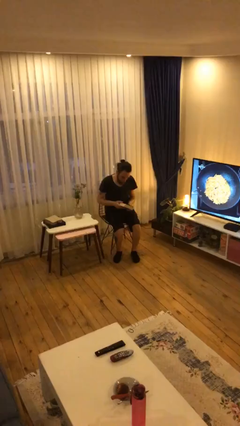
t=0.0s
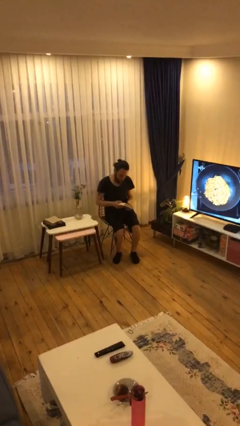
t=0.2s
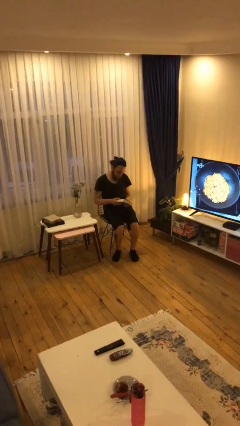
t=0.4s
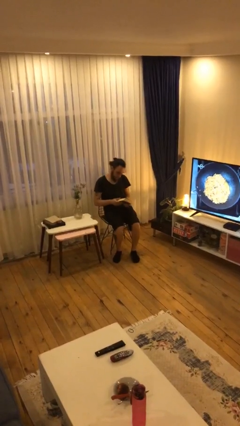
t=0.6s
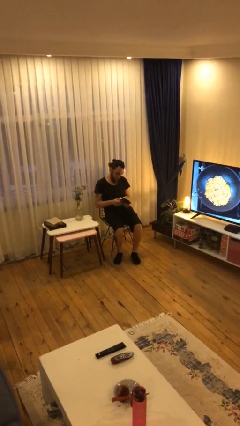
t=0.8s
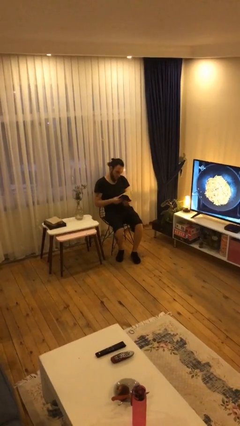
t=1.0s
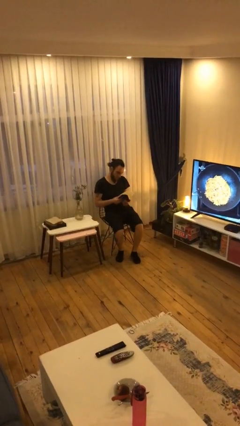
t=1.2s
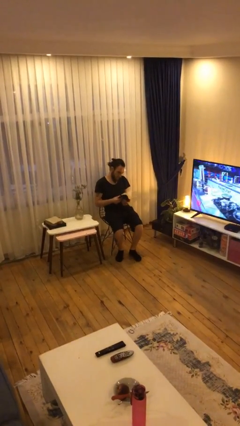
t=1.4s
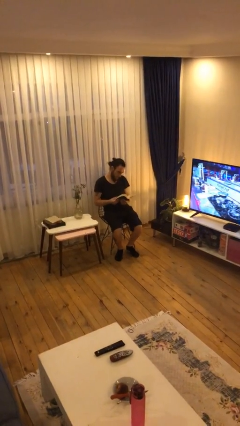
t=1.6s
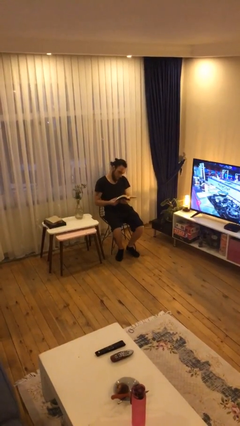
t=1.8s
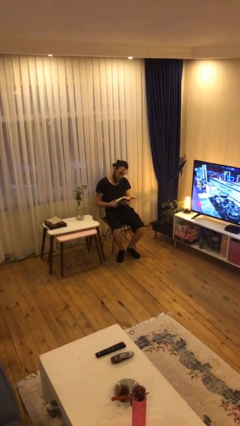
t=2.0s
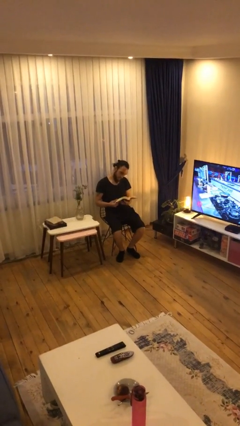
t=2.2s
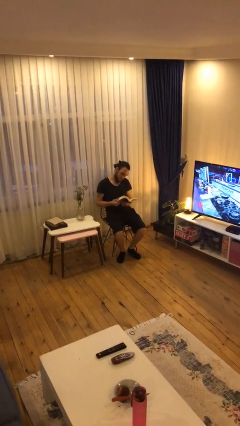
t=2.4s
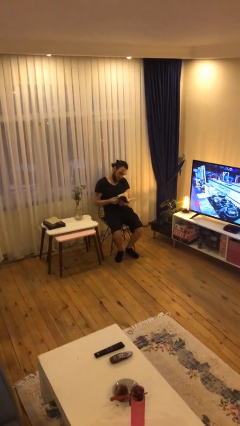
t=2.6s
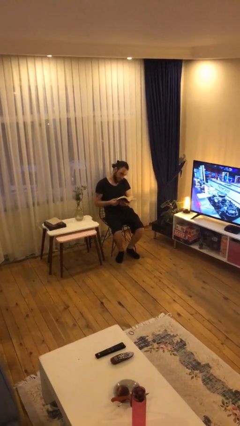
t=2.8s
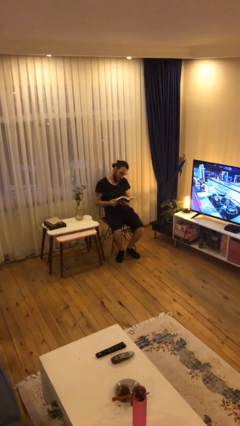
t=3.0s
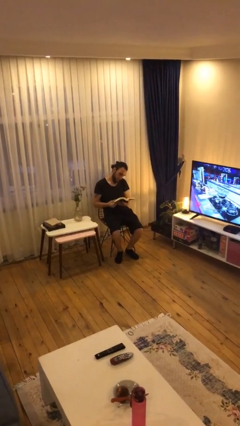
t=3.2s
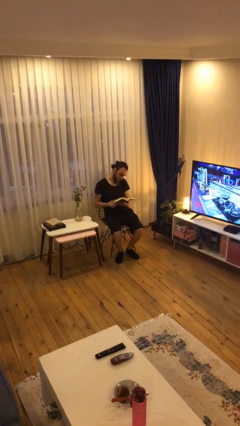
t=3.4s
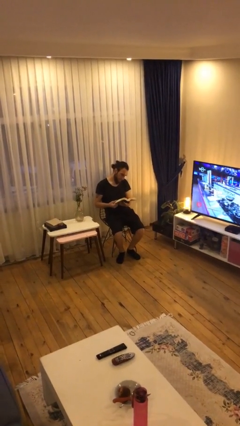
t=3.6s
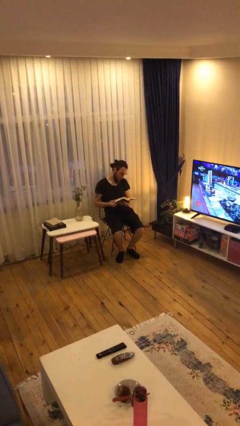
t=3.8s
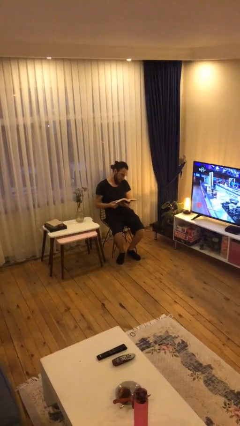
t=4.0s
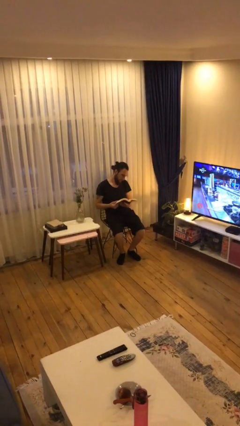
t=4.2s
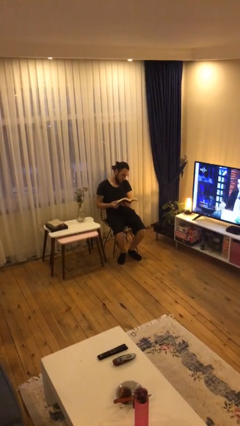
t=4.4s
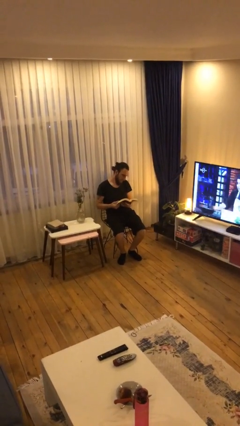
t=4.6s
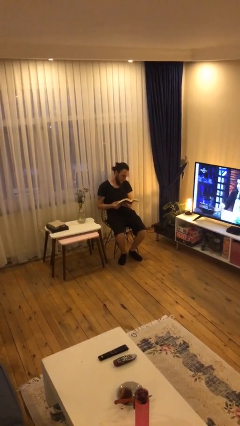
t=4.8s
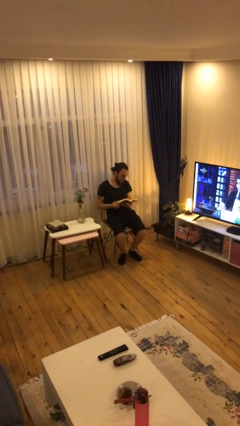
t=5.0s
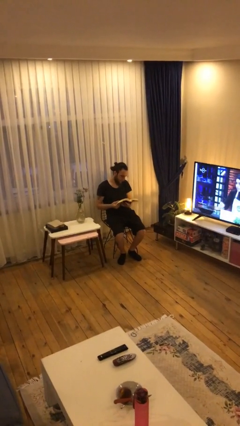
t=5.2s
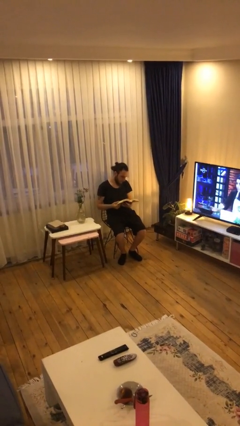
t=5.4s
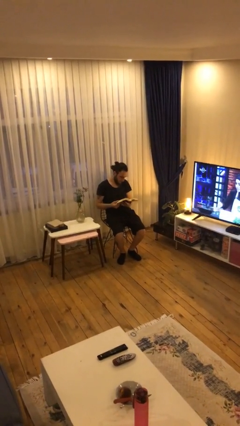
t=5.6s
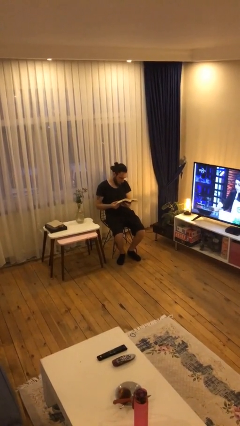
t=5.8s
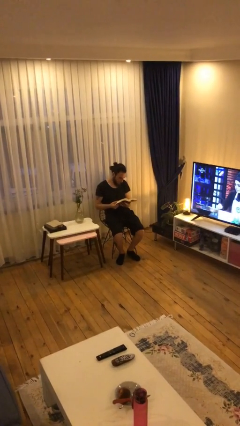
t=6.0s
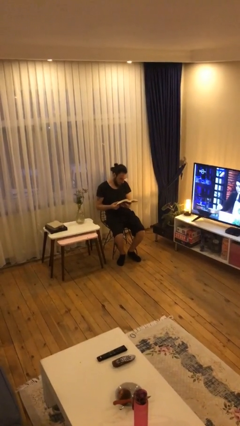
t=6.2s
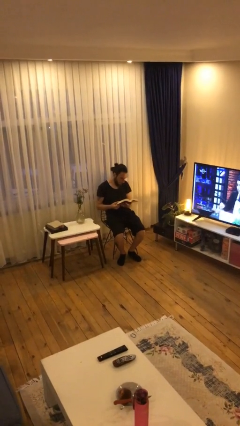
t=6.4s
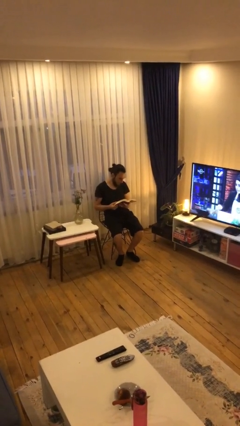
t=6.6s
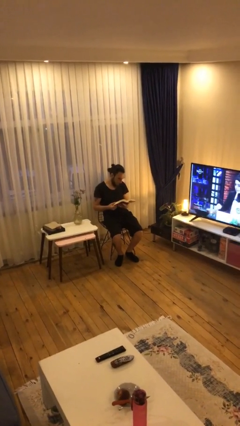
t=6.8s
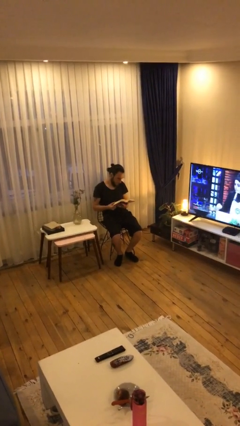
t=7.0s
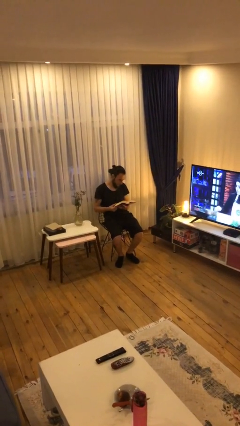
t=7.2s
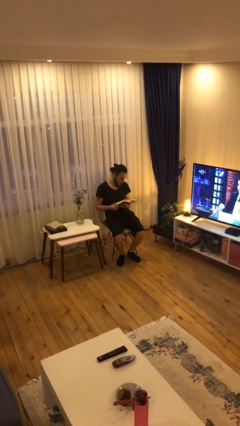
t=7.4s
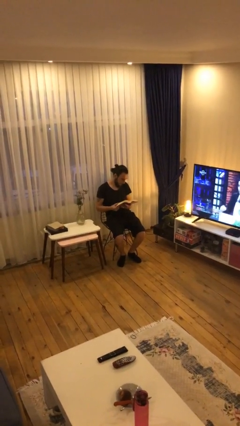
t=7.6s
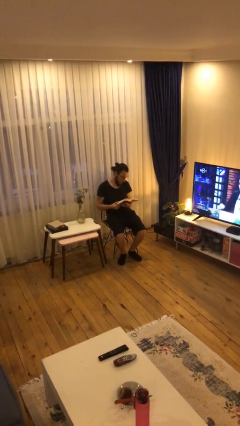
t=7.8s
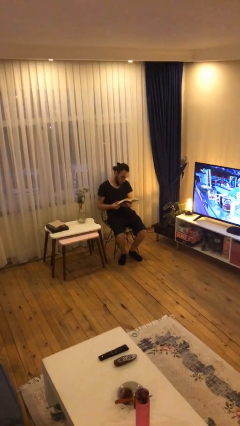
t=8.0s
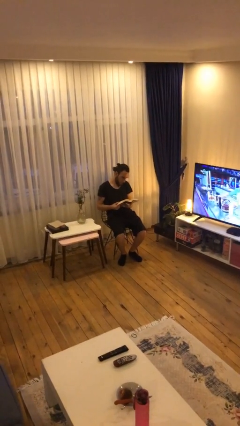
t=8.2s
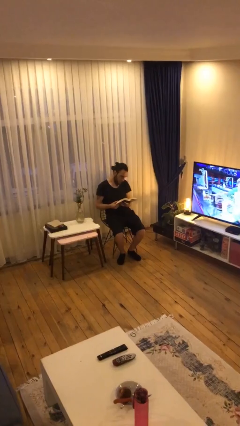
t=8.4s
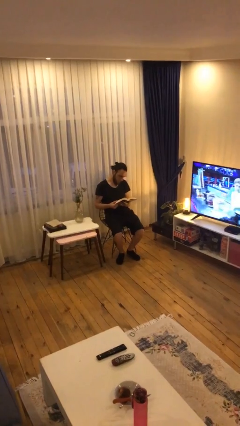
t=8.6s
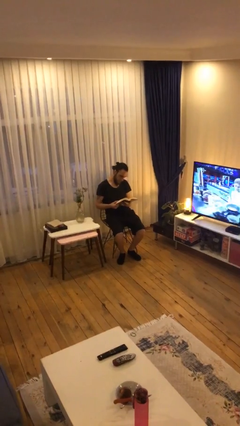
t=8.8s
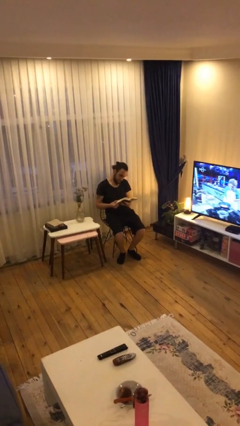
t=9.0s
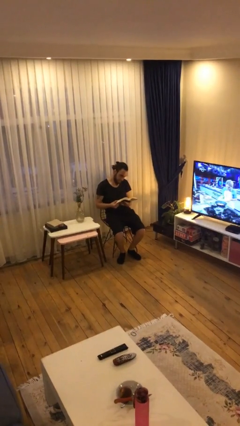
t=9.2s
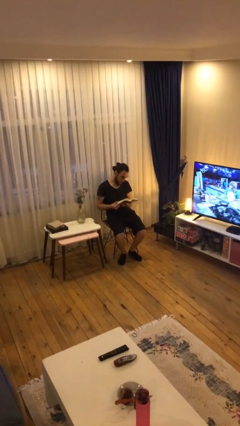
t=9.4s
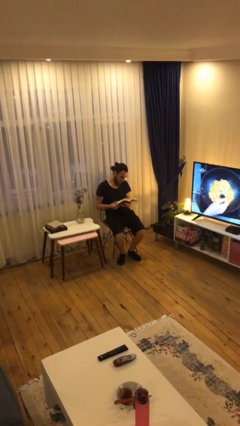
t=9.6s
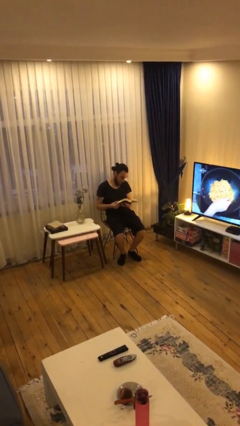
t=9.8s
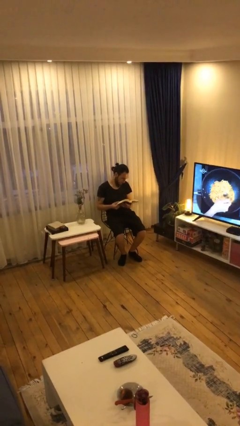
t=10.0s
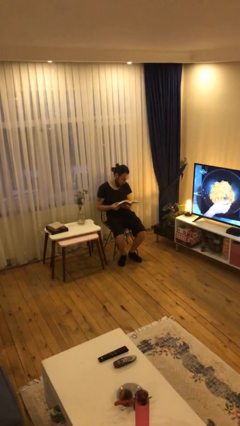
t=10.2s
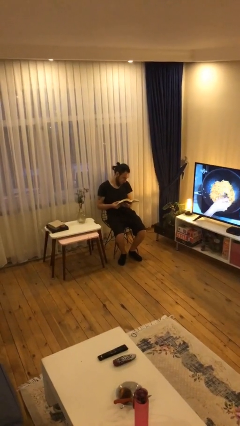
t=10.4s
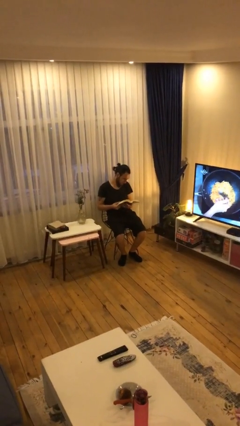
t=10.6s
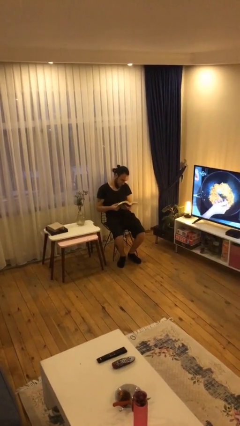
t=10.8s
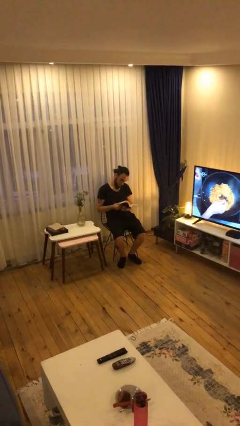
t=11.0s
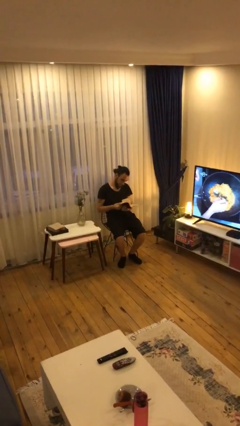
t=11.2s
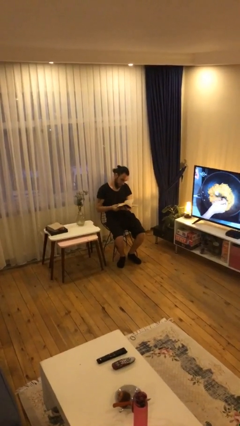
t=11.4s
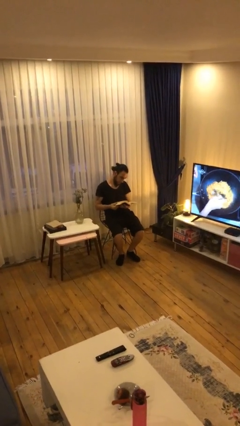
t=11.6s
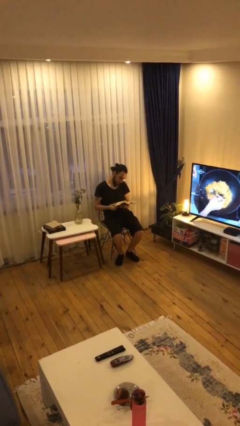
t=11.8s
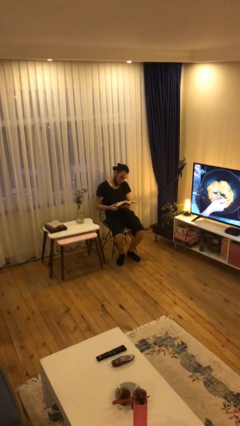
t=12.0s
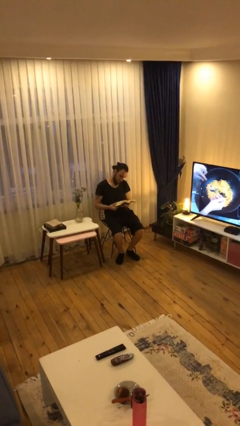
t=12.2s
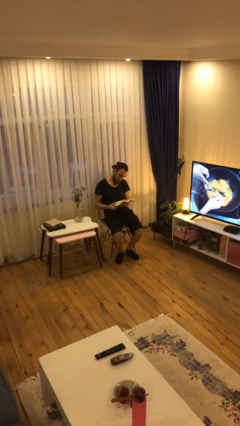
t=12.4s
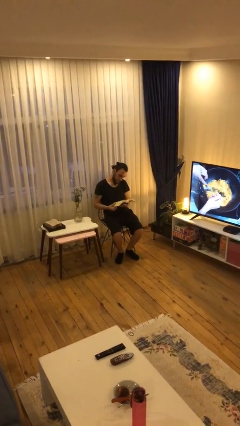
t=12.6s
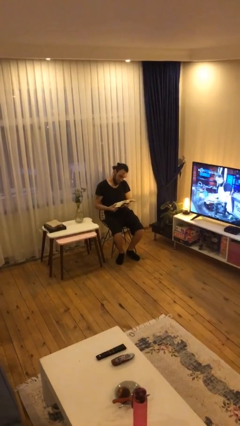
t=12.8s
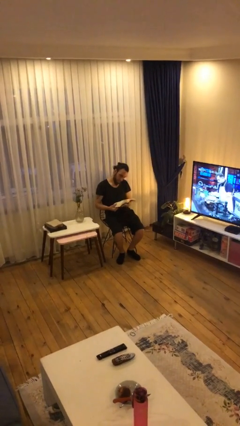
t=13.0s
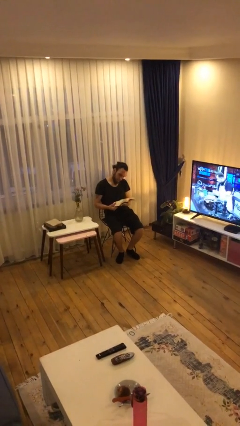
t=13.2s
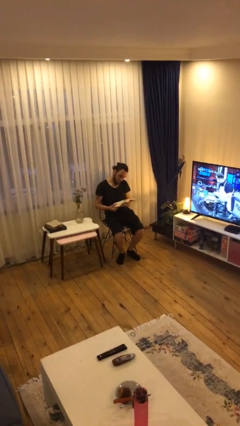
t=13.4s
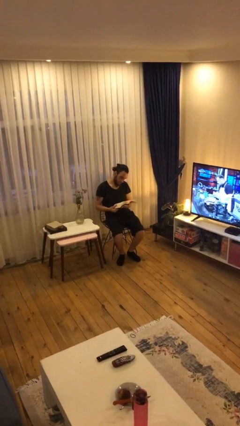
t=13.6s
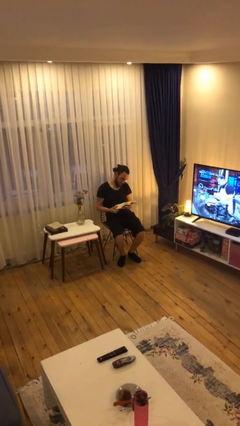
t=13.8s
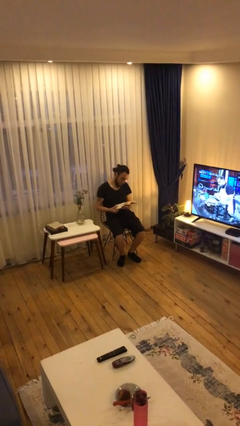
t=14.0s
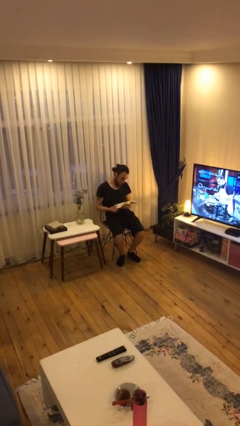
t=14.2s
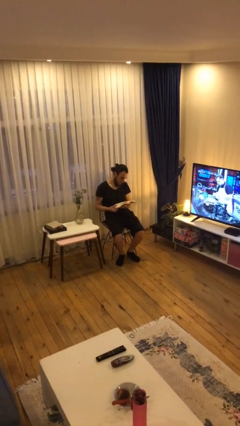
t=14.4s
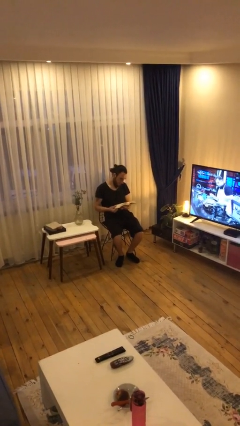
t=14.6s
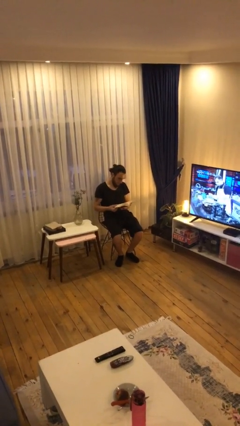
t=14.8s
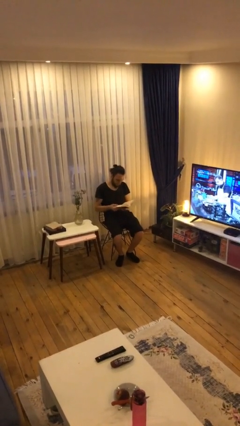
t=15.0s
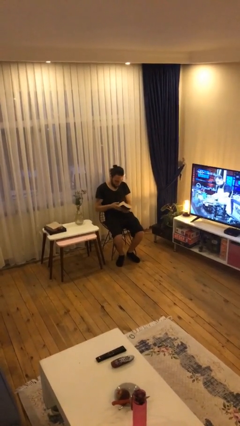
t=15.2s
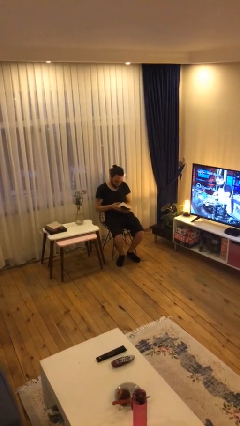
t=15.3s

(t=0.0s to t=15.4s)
person reads document

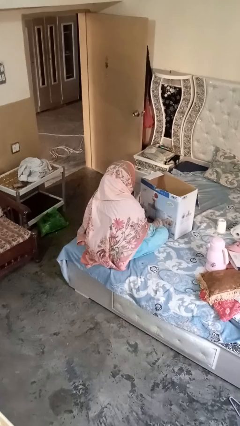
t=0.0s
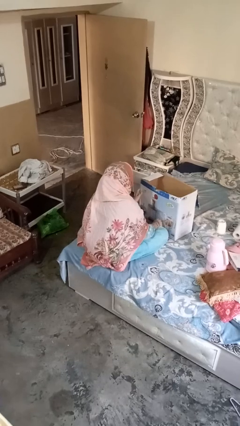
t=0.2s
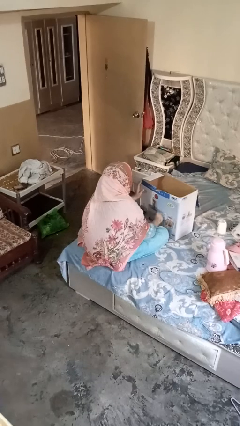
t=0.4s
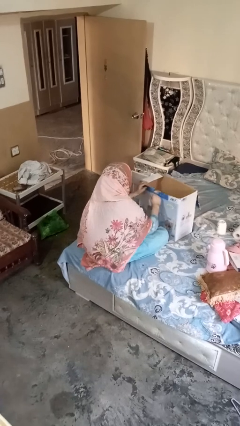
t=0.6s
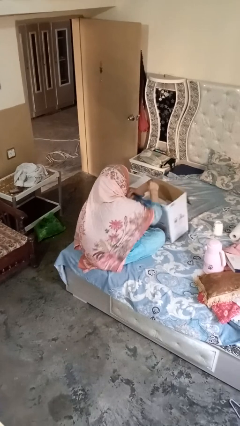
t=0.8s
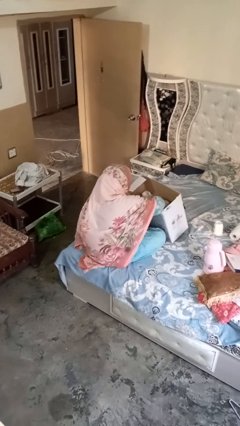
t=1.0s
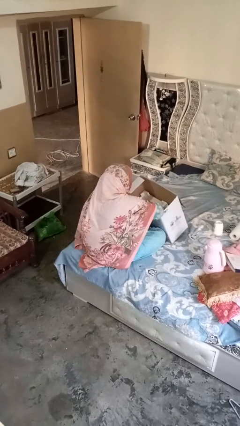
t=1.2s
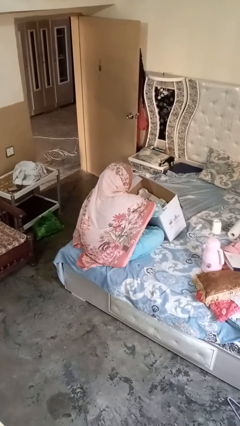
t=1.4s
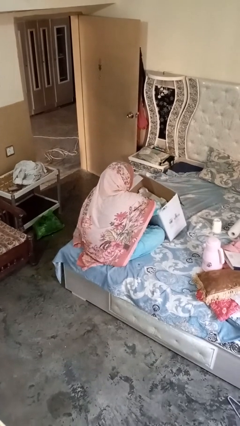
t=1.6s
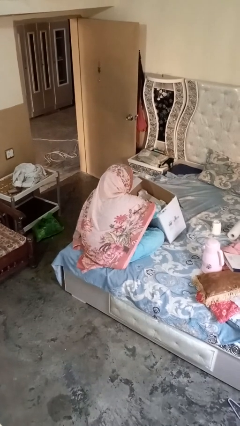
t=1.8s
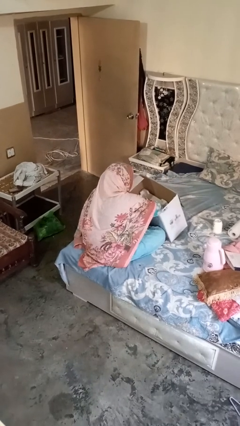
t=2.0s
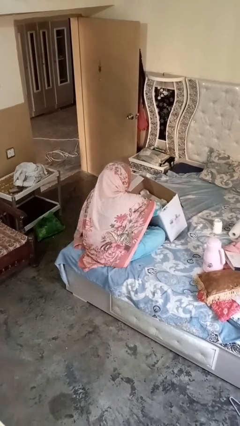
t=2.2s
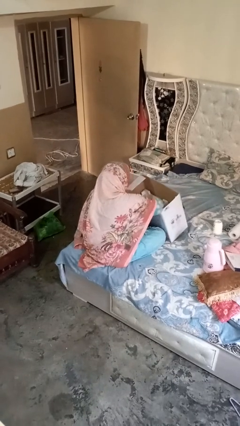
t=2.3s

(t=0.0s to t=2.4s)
person searches in box

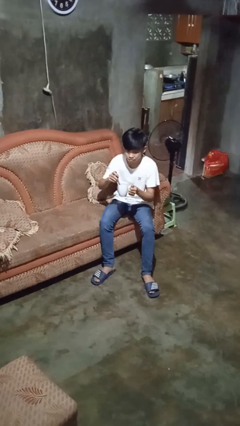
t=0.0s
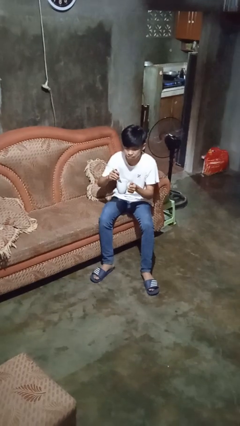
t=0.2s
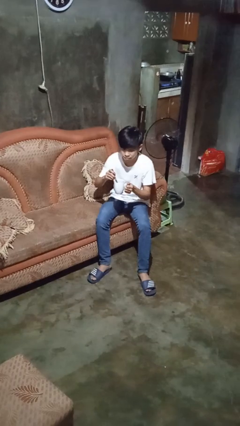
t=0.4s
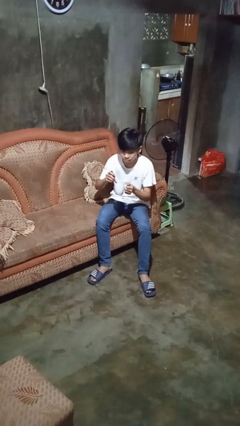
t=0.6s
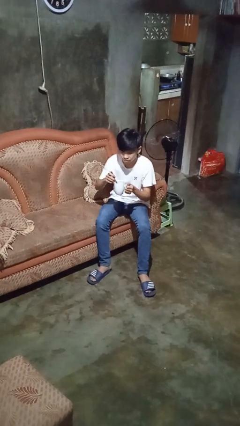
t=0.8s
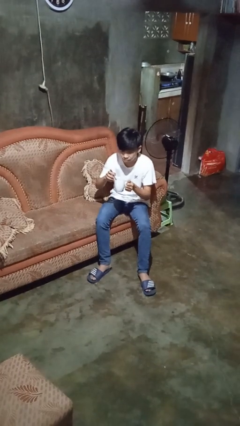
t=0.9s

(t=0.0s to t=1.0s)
person stirs mug
